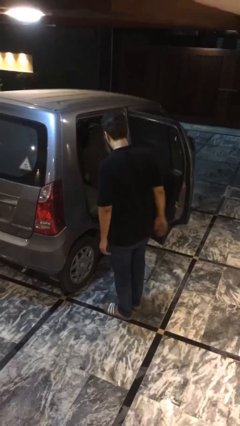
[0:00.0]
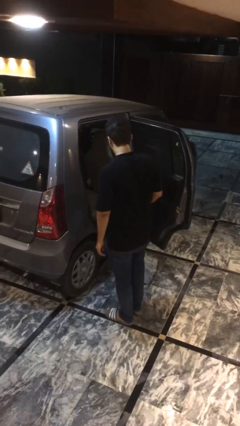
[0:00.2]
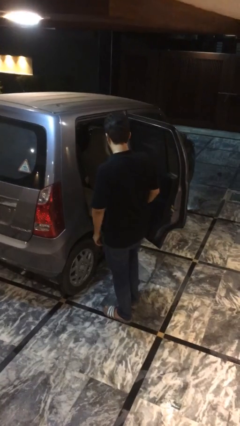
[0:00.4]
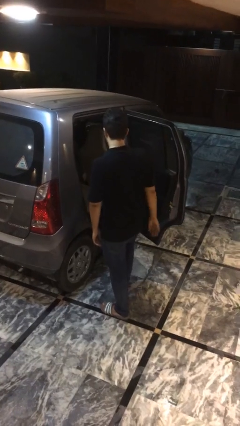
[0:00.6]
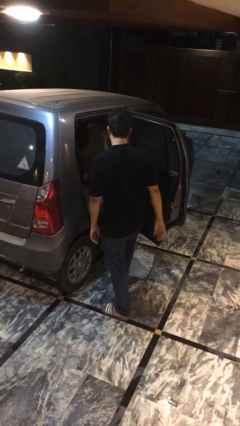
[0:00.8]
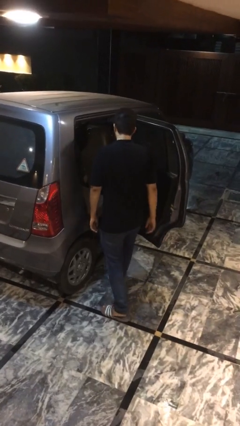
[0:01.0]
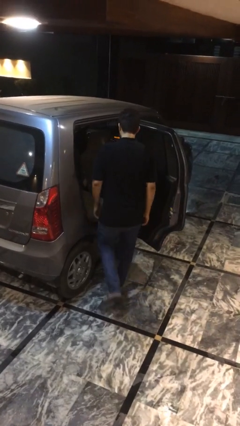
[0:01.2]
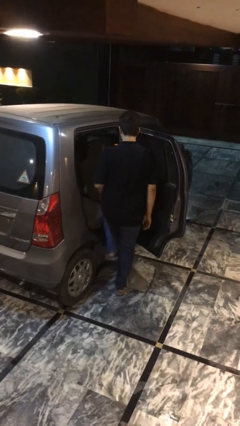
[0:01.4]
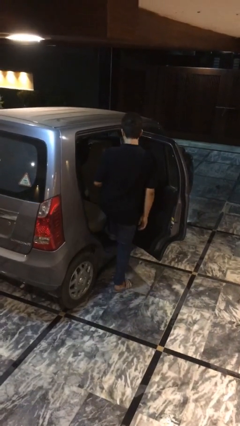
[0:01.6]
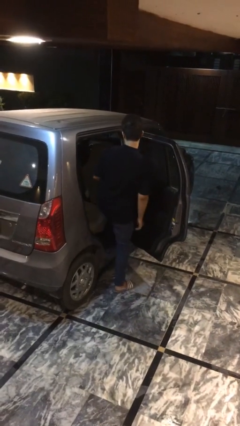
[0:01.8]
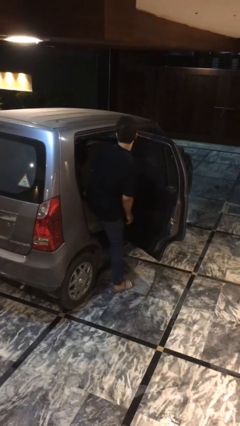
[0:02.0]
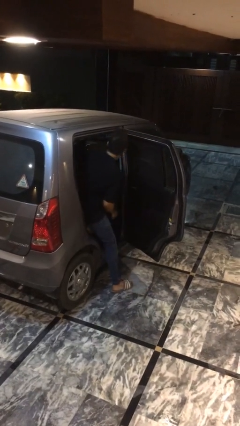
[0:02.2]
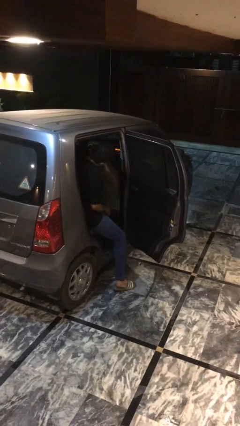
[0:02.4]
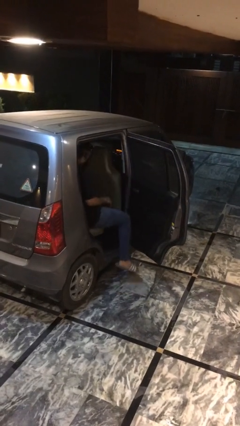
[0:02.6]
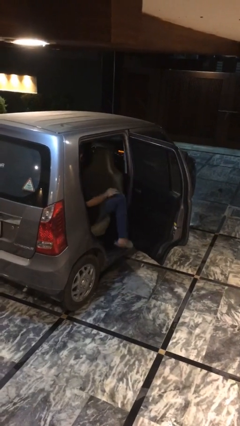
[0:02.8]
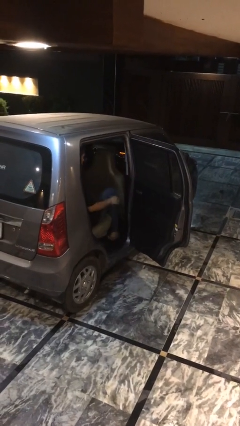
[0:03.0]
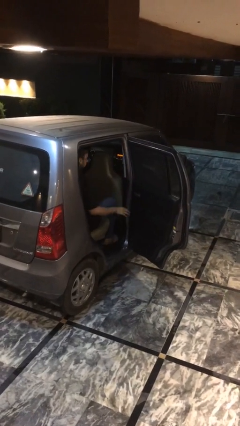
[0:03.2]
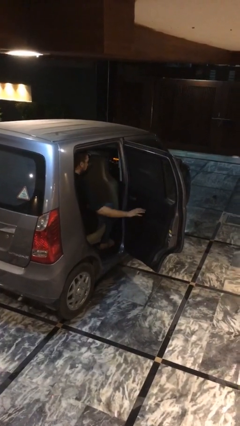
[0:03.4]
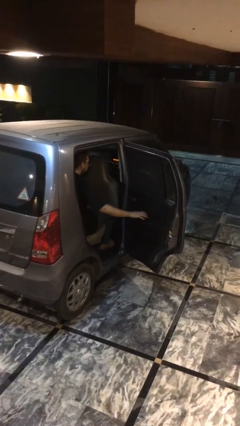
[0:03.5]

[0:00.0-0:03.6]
person enters car

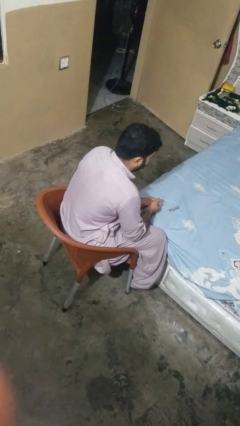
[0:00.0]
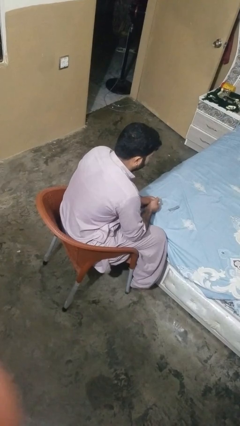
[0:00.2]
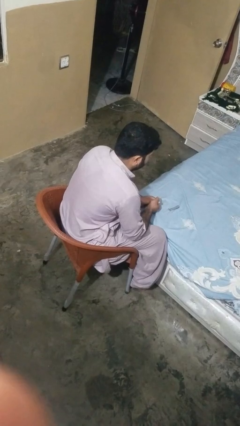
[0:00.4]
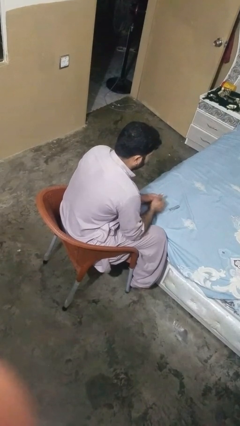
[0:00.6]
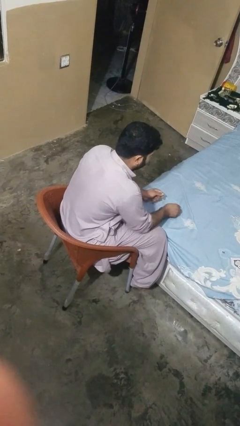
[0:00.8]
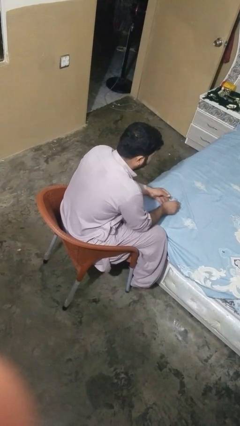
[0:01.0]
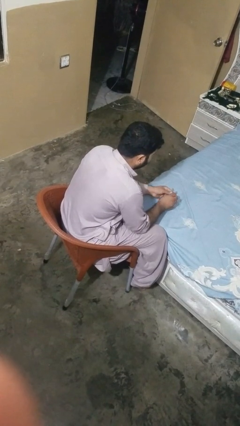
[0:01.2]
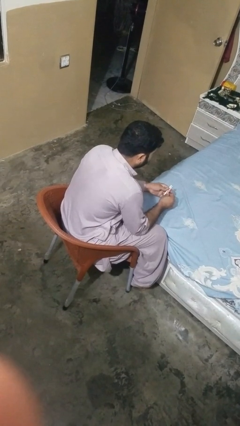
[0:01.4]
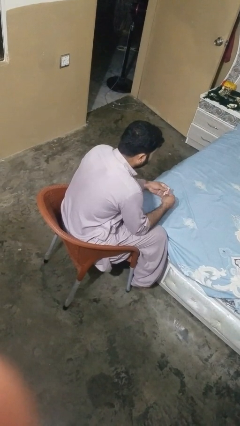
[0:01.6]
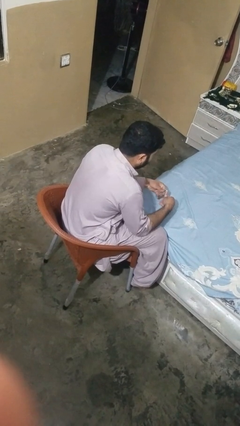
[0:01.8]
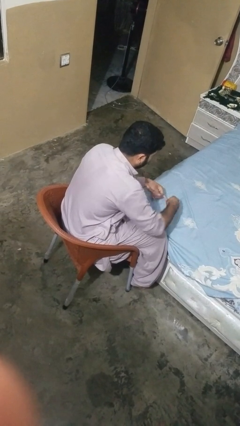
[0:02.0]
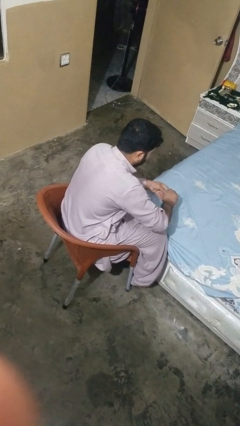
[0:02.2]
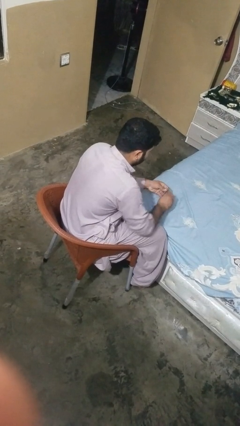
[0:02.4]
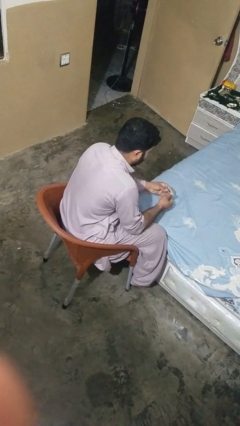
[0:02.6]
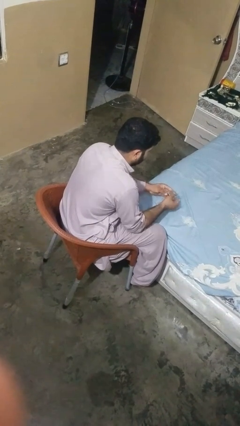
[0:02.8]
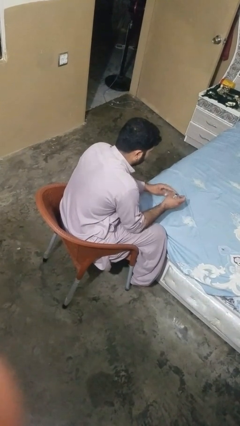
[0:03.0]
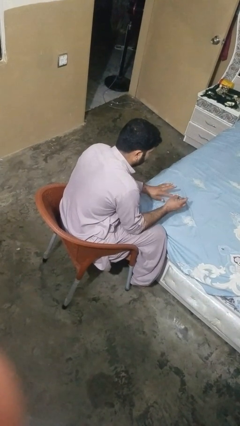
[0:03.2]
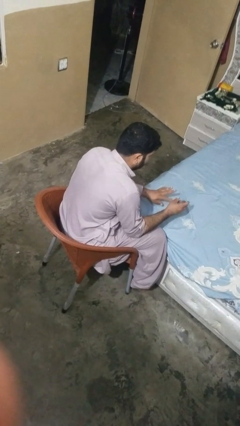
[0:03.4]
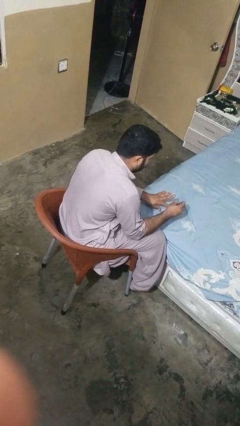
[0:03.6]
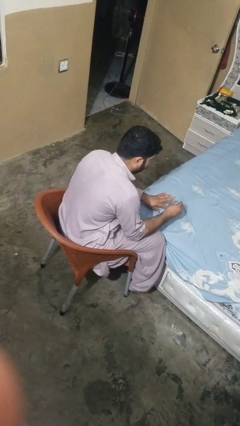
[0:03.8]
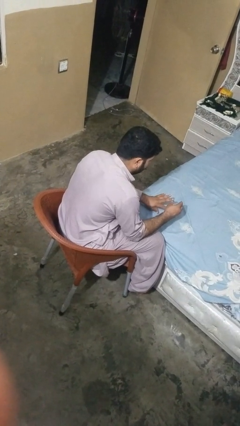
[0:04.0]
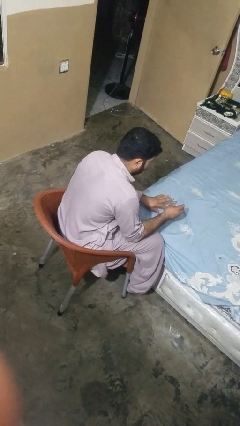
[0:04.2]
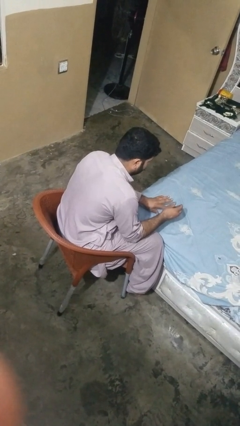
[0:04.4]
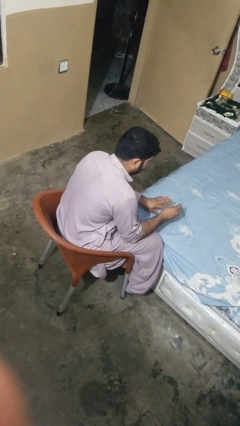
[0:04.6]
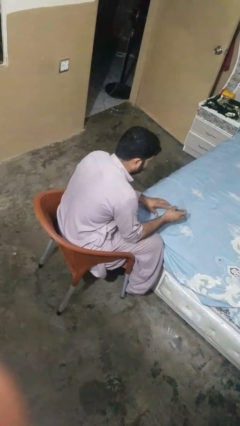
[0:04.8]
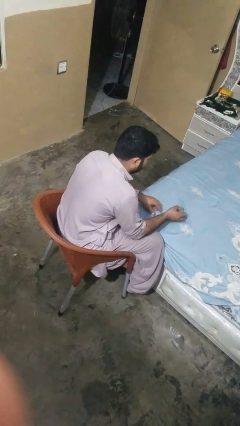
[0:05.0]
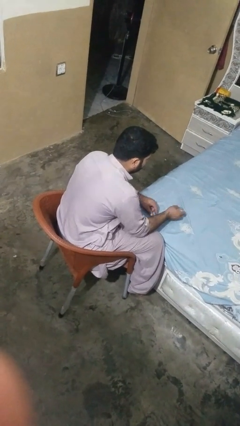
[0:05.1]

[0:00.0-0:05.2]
person clips fingernails

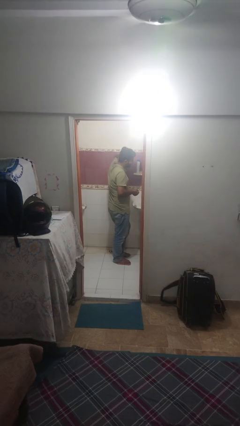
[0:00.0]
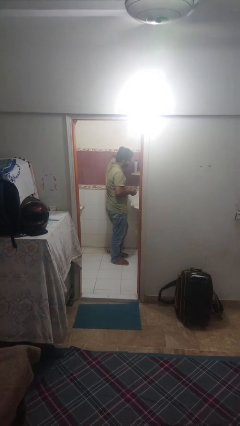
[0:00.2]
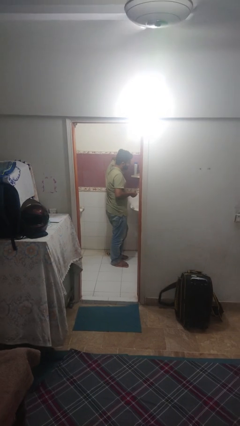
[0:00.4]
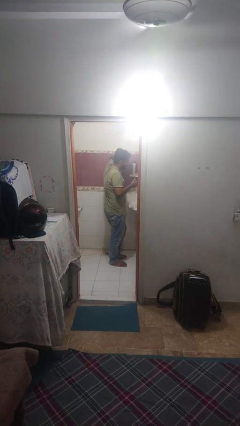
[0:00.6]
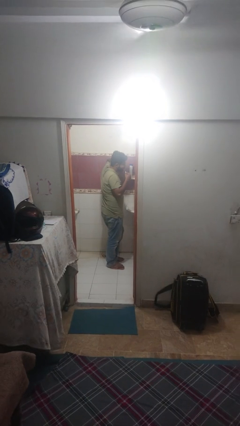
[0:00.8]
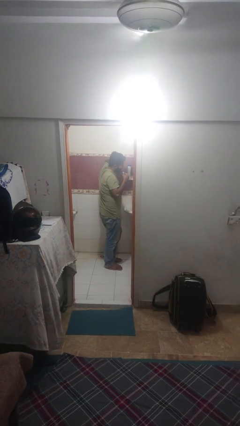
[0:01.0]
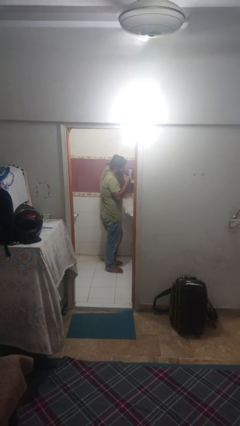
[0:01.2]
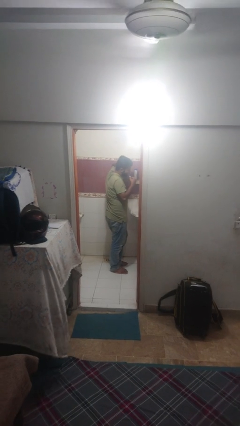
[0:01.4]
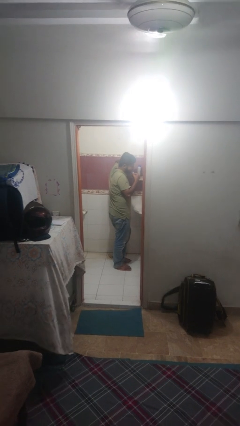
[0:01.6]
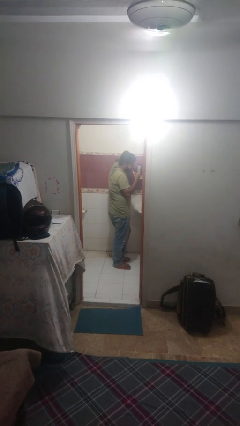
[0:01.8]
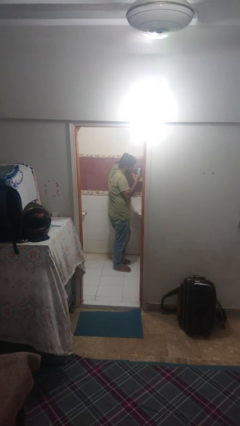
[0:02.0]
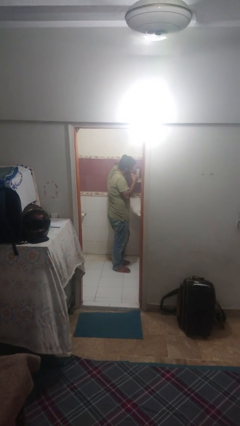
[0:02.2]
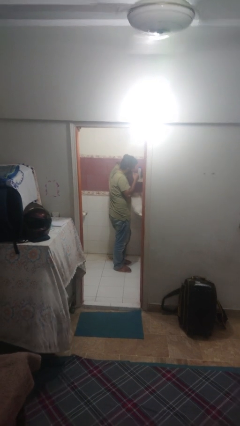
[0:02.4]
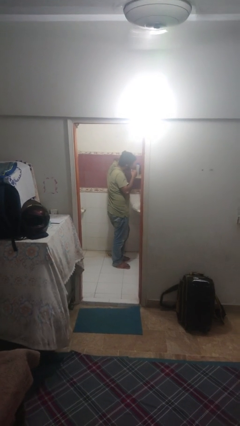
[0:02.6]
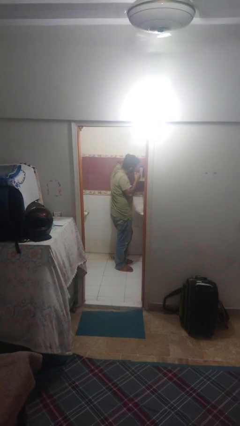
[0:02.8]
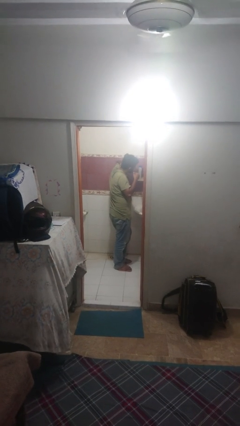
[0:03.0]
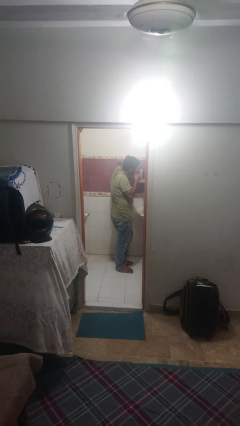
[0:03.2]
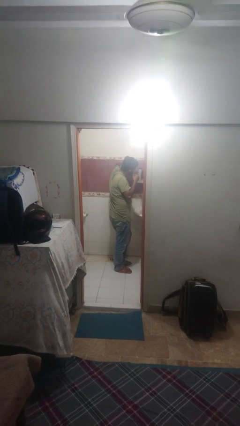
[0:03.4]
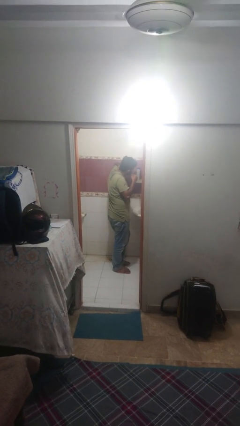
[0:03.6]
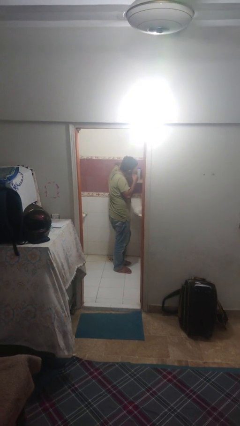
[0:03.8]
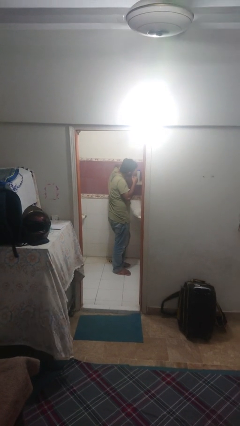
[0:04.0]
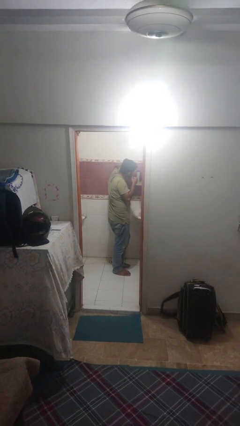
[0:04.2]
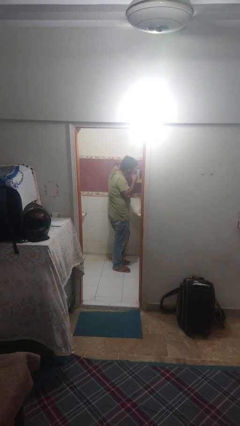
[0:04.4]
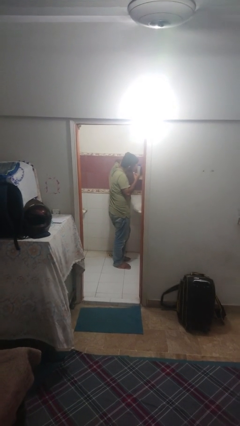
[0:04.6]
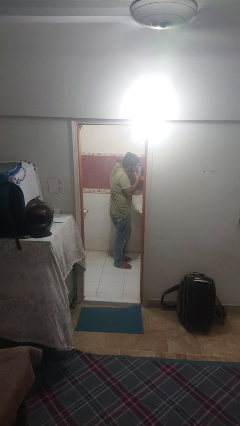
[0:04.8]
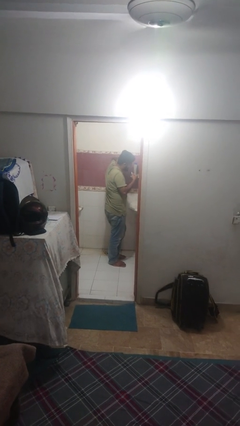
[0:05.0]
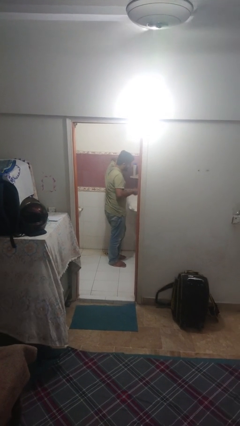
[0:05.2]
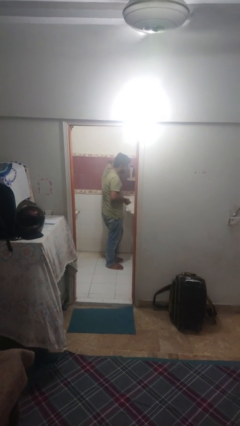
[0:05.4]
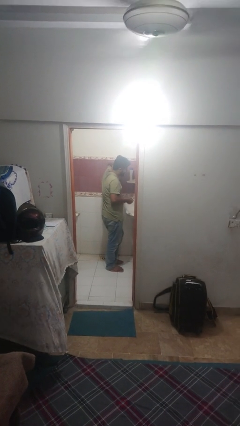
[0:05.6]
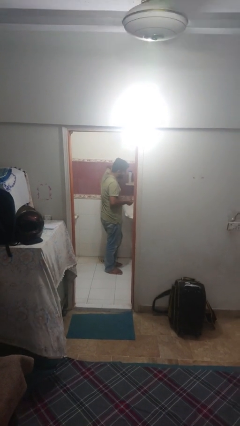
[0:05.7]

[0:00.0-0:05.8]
person brushes teeth

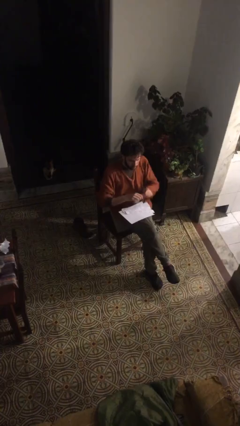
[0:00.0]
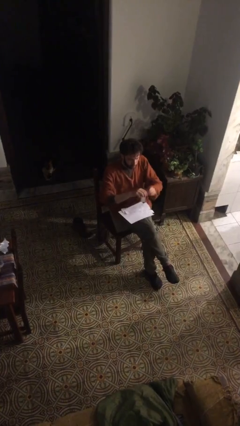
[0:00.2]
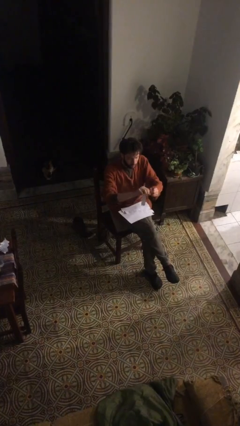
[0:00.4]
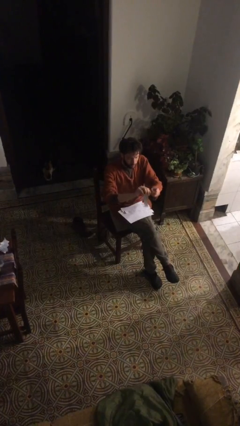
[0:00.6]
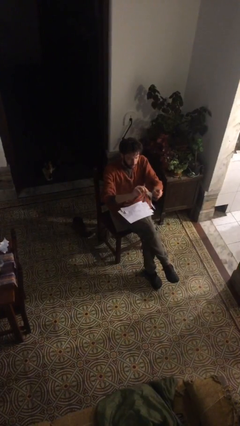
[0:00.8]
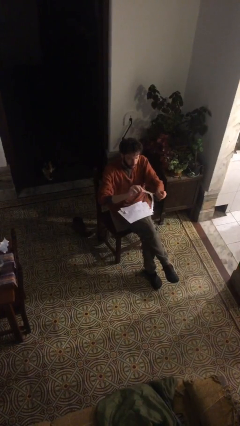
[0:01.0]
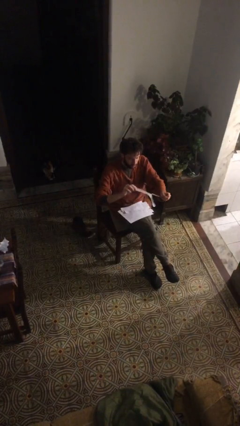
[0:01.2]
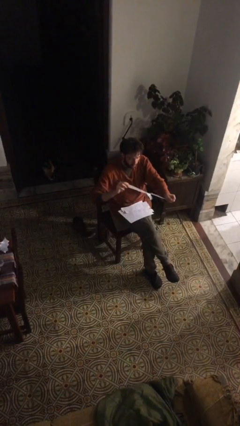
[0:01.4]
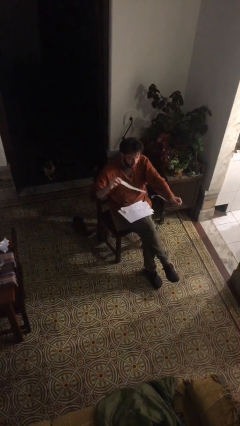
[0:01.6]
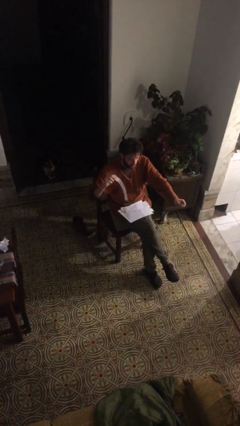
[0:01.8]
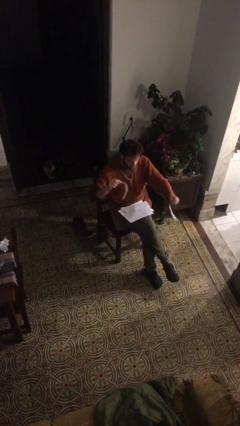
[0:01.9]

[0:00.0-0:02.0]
person tears paper

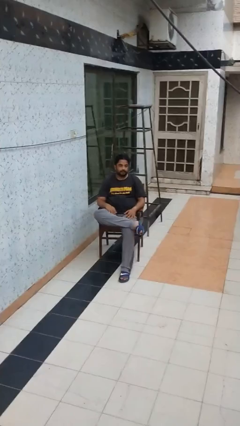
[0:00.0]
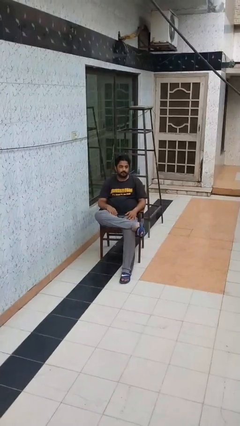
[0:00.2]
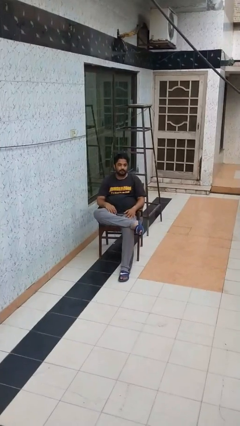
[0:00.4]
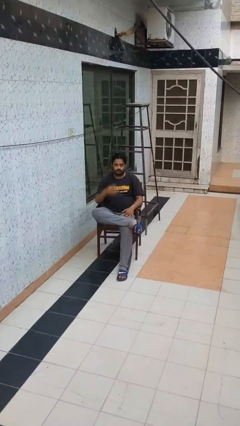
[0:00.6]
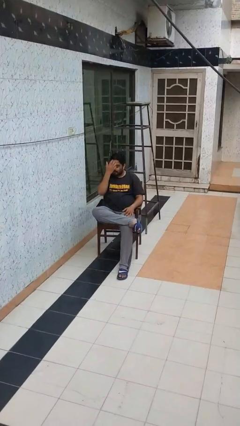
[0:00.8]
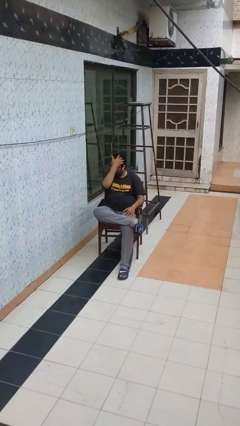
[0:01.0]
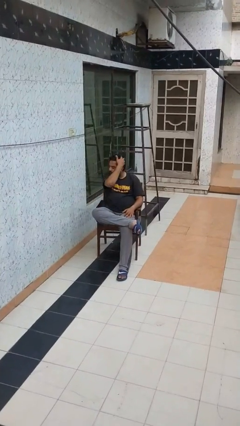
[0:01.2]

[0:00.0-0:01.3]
person strokes hair

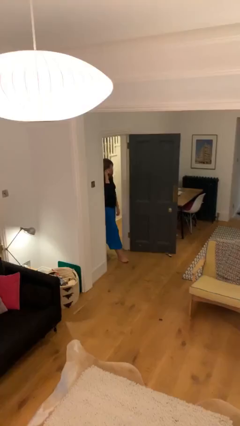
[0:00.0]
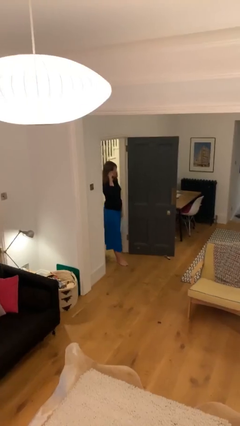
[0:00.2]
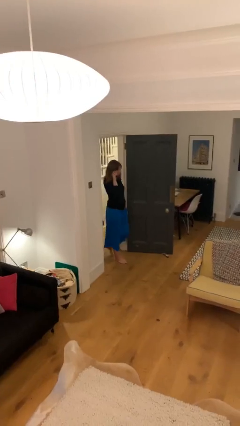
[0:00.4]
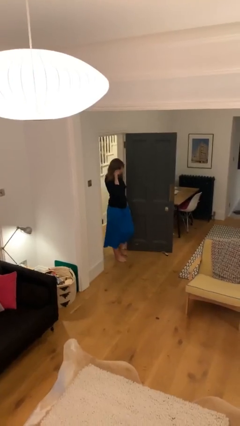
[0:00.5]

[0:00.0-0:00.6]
person enters scene through structure
